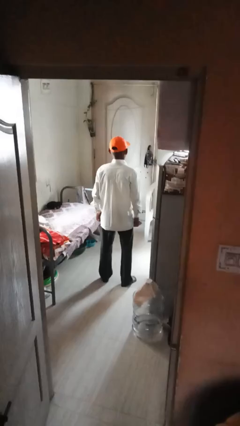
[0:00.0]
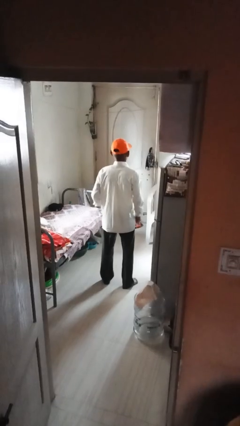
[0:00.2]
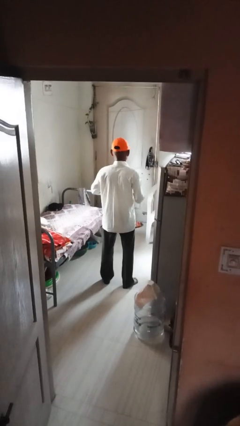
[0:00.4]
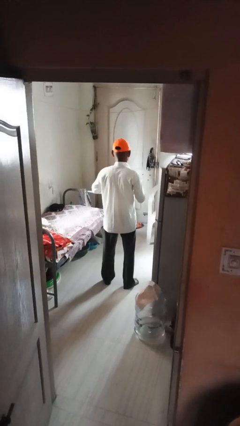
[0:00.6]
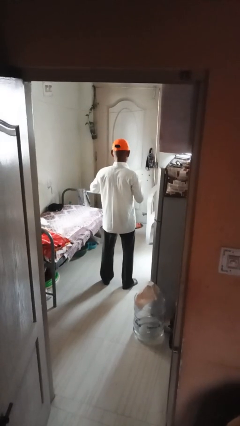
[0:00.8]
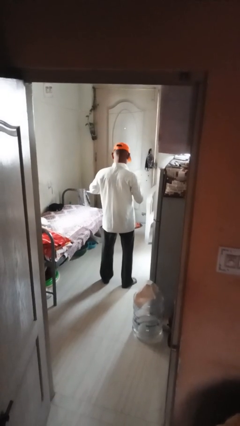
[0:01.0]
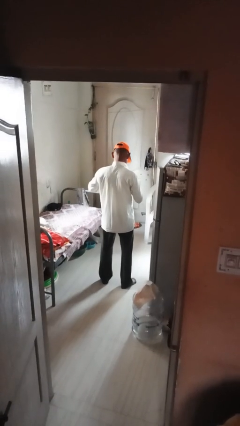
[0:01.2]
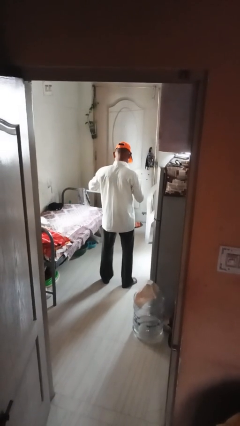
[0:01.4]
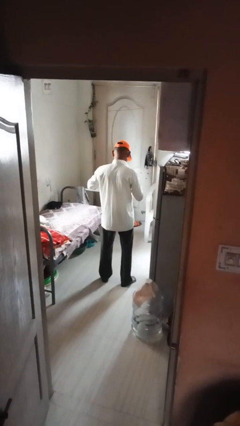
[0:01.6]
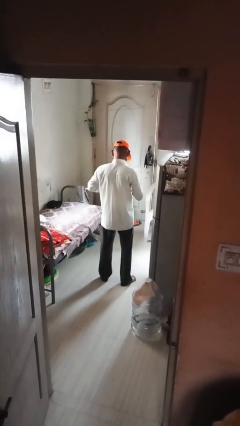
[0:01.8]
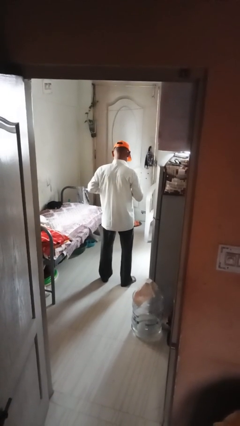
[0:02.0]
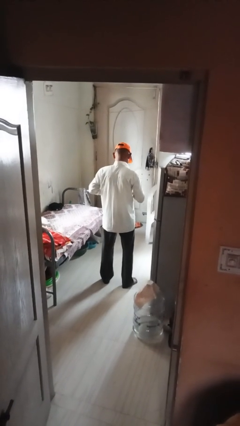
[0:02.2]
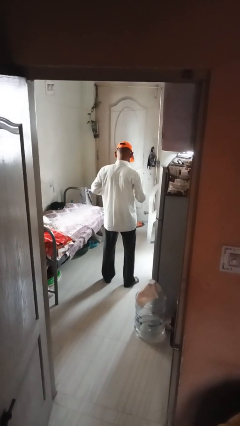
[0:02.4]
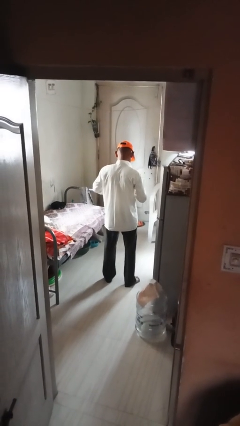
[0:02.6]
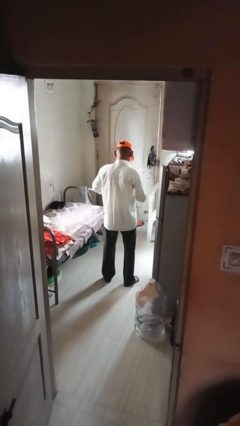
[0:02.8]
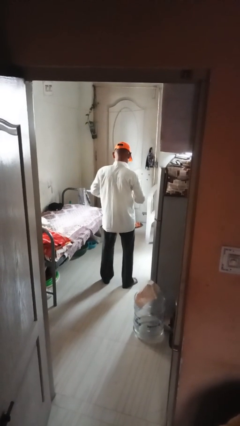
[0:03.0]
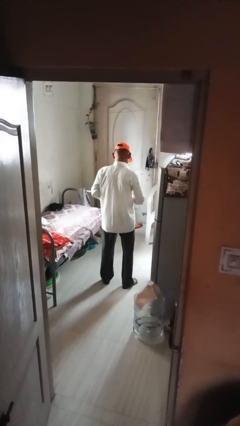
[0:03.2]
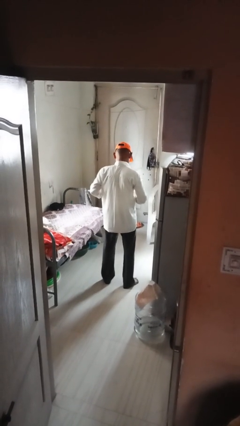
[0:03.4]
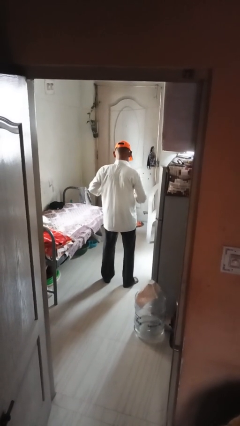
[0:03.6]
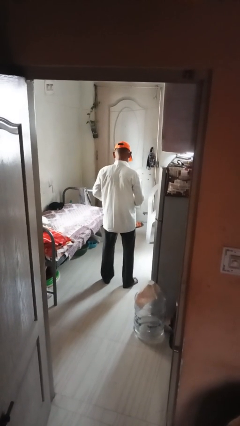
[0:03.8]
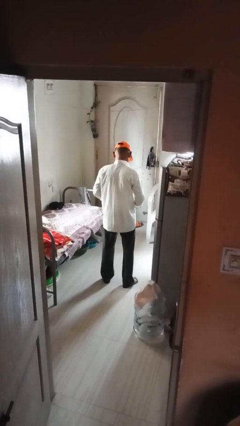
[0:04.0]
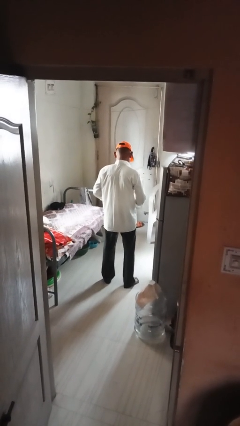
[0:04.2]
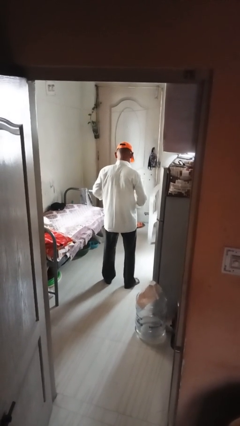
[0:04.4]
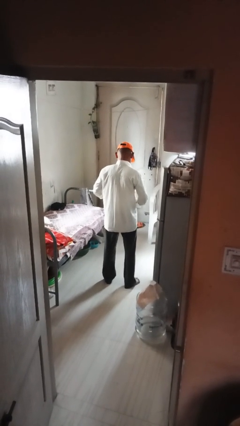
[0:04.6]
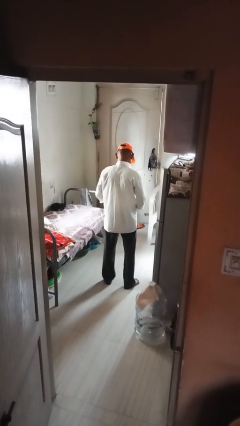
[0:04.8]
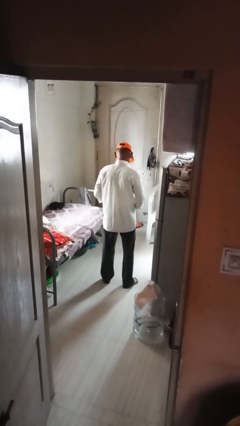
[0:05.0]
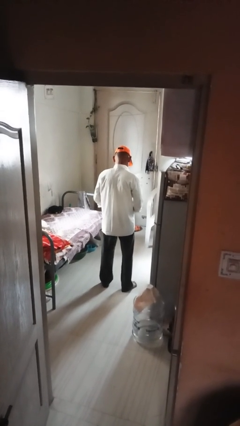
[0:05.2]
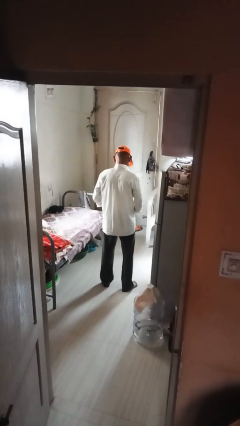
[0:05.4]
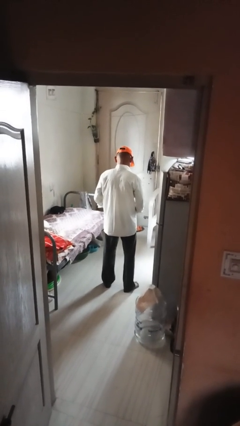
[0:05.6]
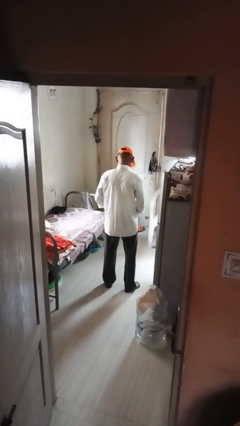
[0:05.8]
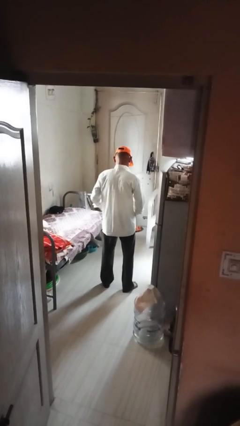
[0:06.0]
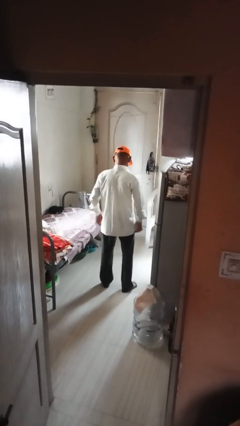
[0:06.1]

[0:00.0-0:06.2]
person unbuttons shirt

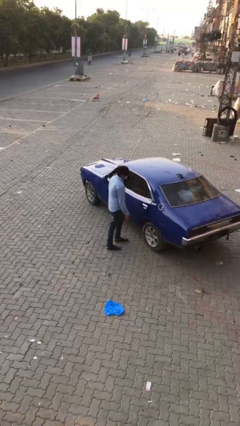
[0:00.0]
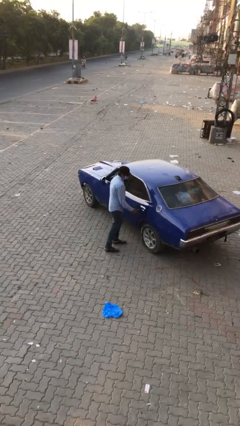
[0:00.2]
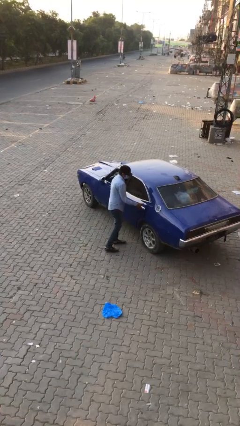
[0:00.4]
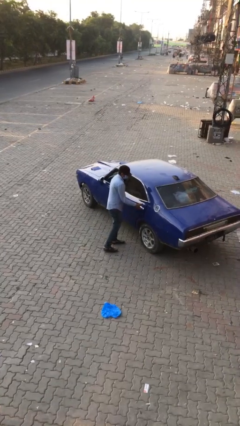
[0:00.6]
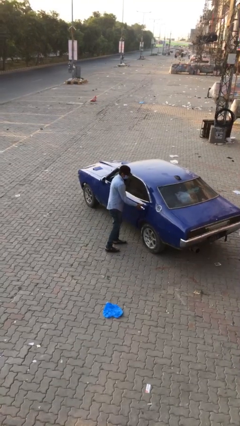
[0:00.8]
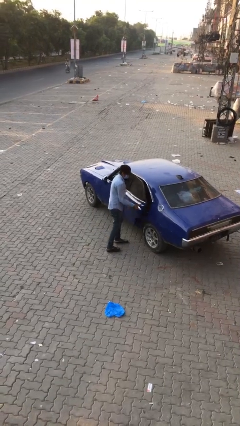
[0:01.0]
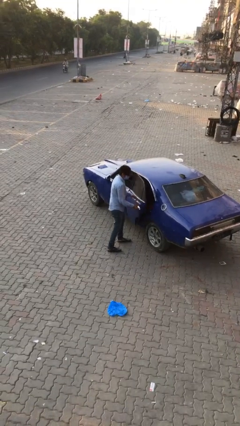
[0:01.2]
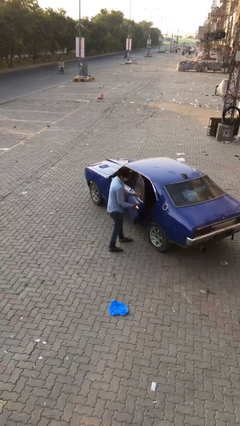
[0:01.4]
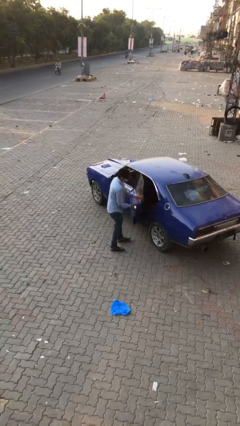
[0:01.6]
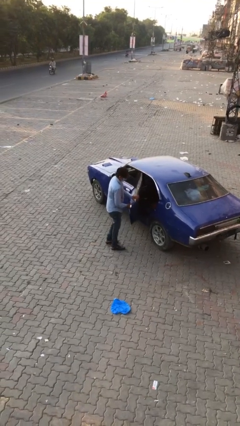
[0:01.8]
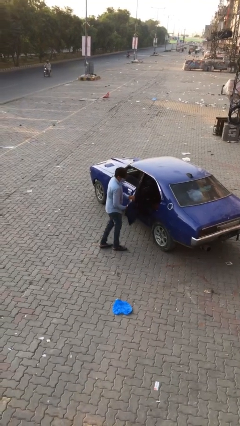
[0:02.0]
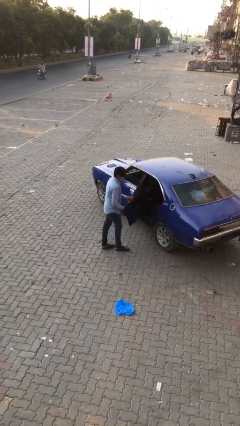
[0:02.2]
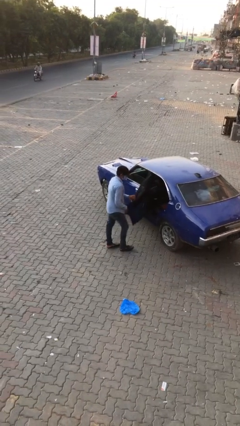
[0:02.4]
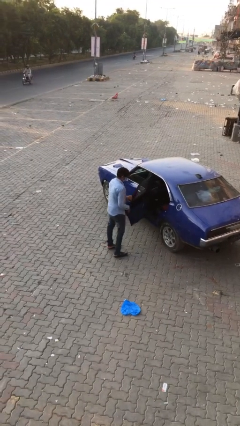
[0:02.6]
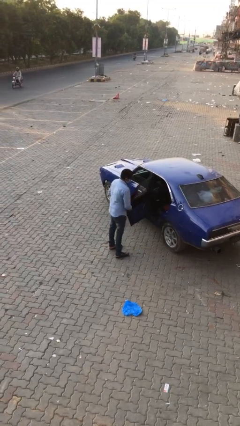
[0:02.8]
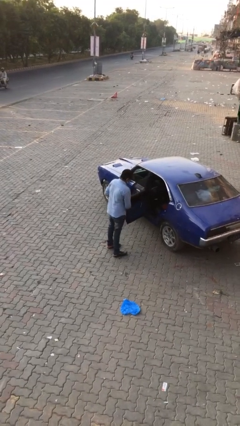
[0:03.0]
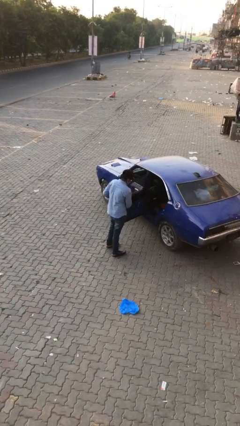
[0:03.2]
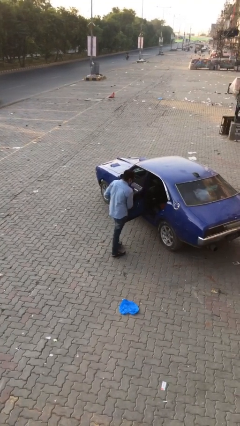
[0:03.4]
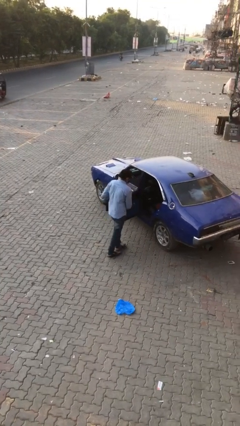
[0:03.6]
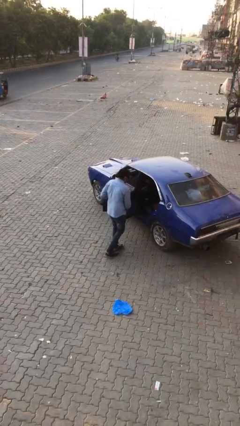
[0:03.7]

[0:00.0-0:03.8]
person opens car door

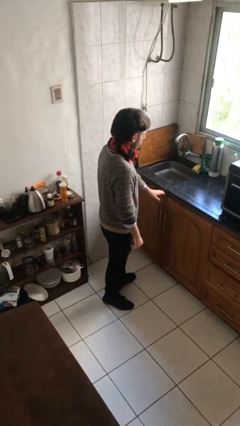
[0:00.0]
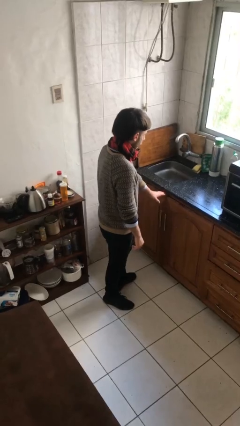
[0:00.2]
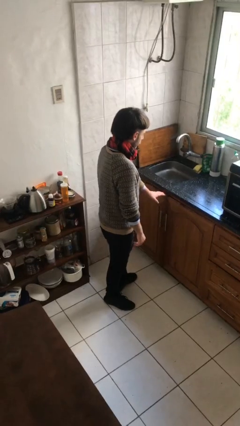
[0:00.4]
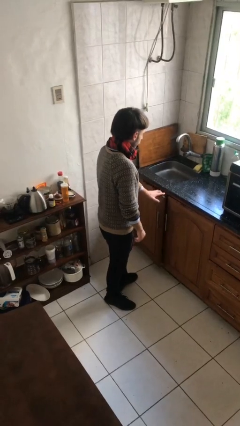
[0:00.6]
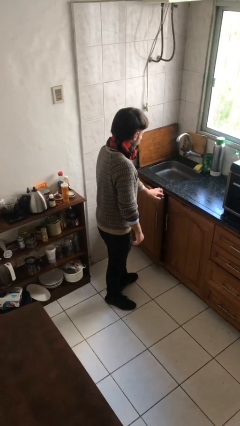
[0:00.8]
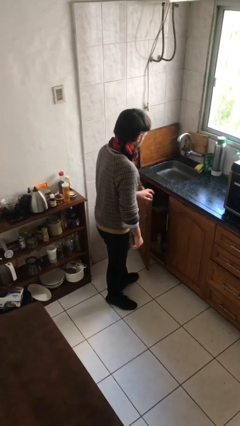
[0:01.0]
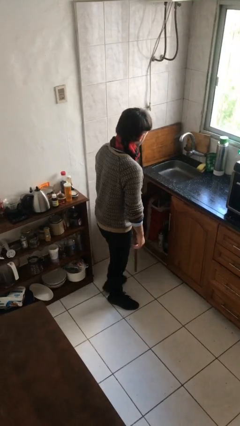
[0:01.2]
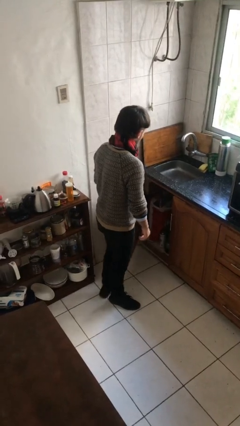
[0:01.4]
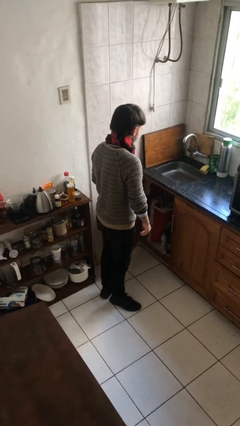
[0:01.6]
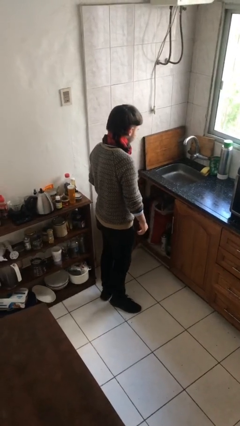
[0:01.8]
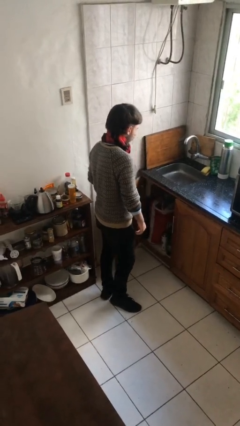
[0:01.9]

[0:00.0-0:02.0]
person closes cabinet

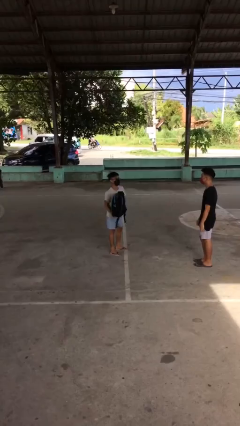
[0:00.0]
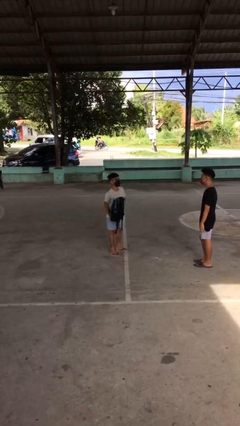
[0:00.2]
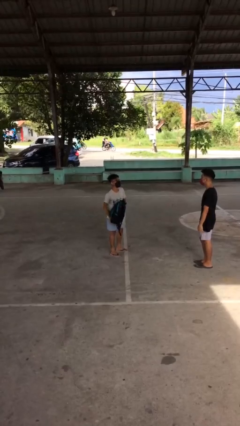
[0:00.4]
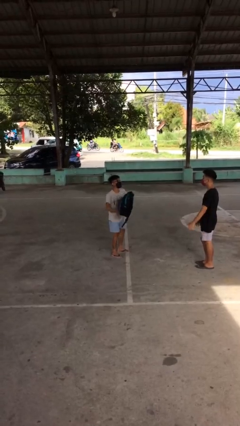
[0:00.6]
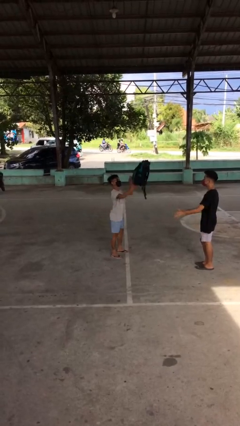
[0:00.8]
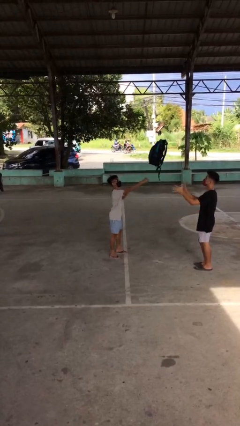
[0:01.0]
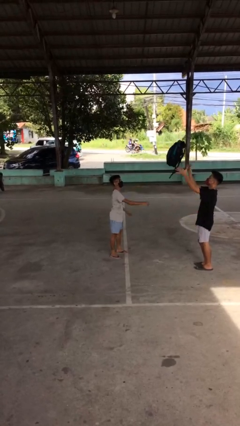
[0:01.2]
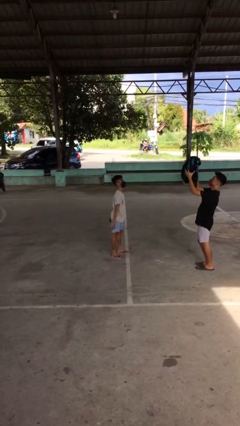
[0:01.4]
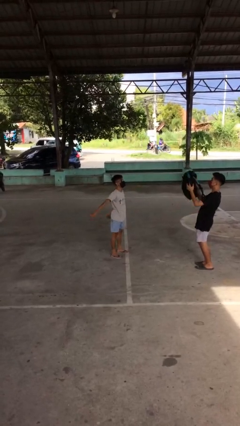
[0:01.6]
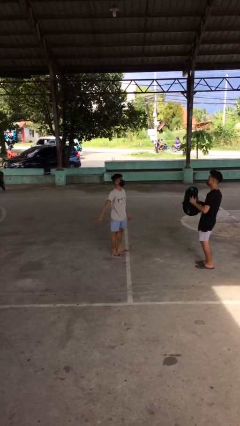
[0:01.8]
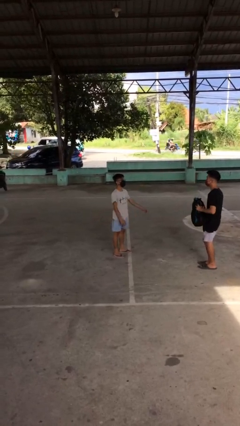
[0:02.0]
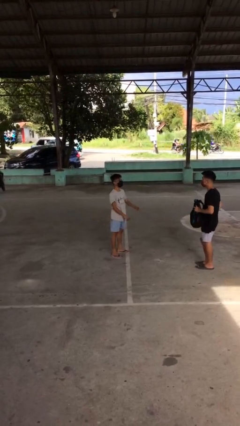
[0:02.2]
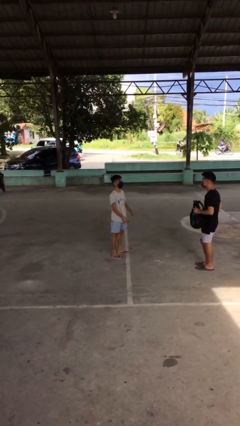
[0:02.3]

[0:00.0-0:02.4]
person throws object to person

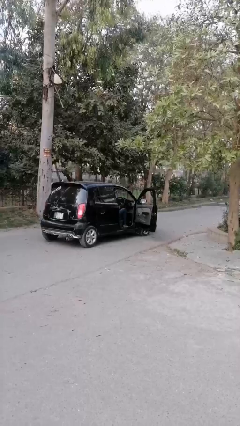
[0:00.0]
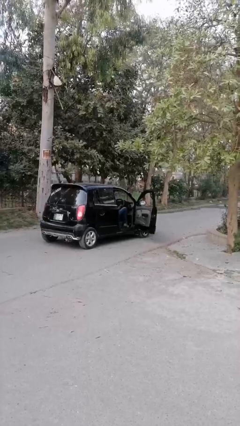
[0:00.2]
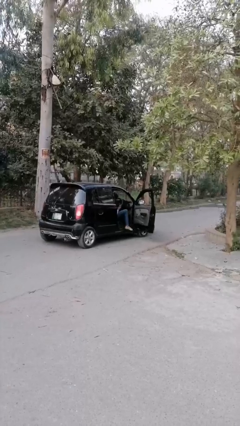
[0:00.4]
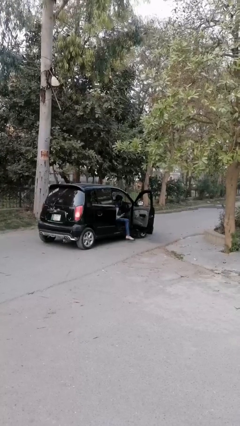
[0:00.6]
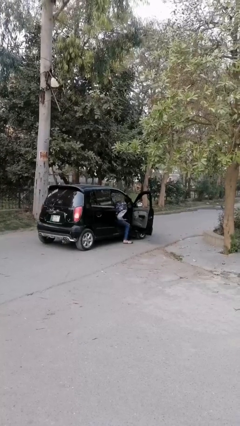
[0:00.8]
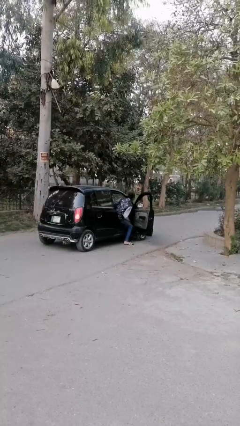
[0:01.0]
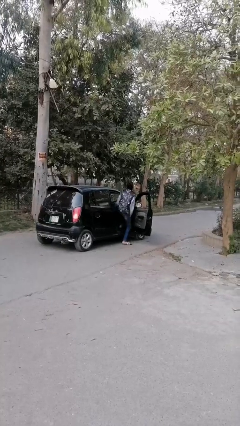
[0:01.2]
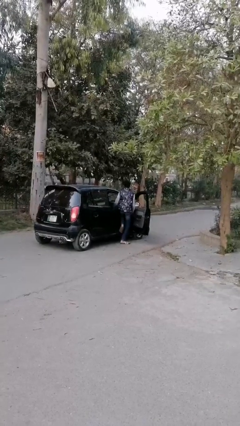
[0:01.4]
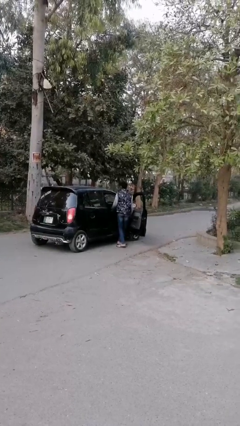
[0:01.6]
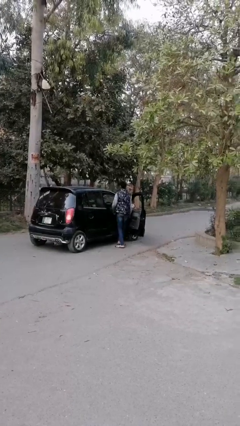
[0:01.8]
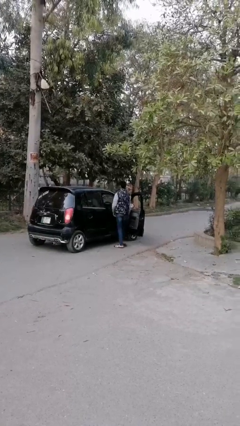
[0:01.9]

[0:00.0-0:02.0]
person exits car

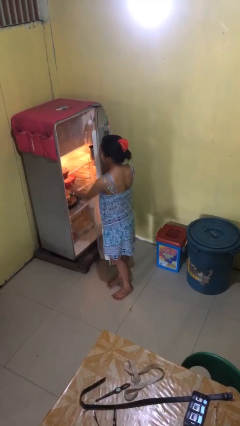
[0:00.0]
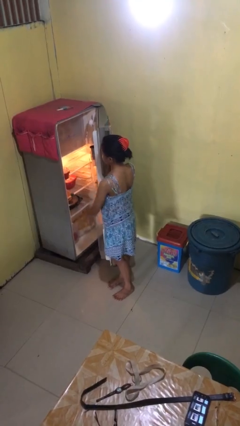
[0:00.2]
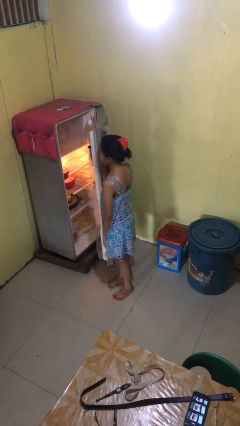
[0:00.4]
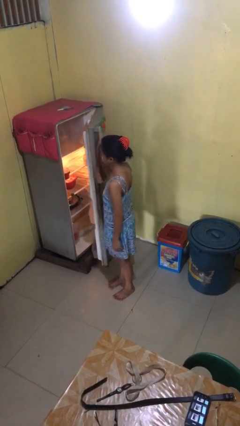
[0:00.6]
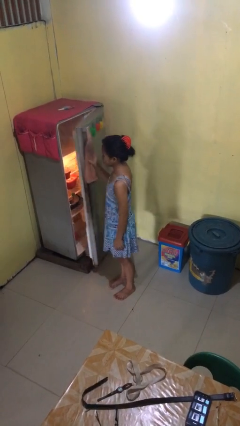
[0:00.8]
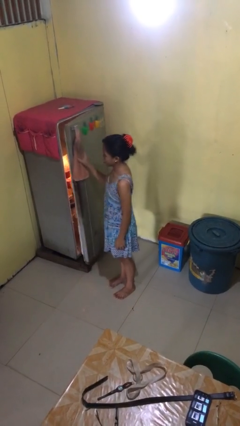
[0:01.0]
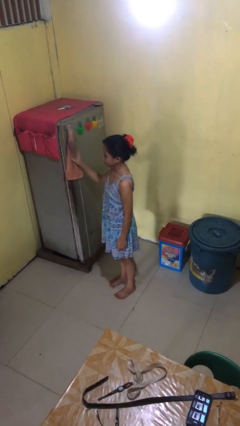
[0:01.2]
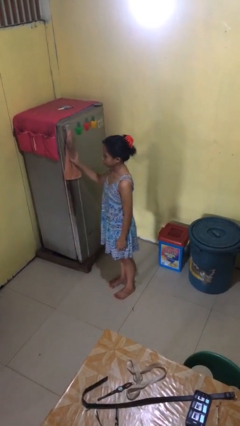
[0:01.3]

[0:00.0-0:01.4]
person closes refrigerator
